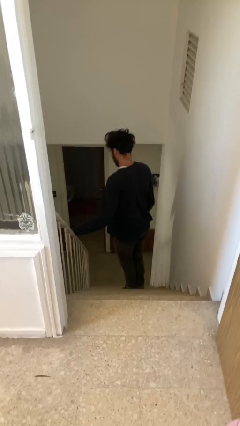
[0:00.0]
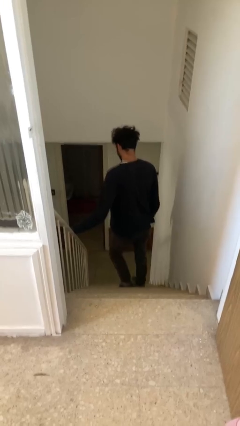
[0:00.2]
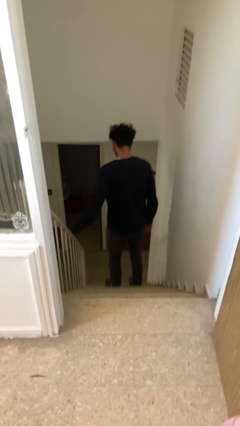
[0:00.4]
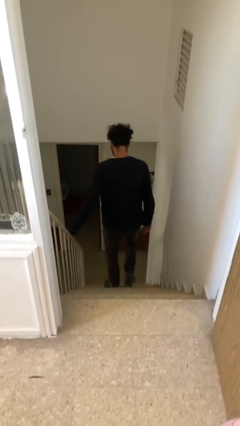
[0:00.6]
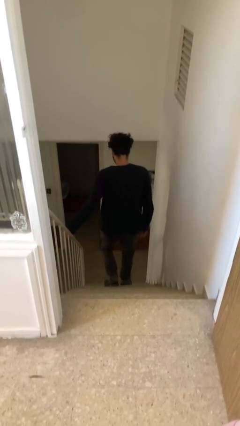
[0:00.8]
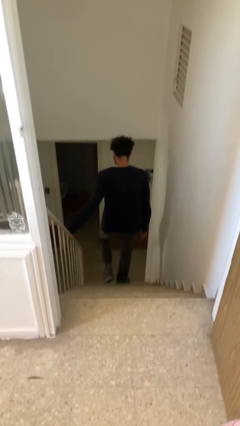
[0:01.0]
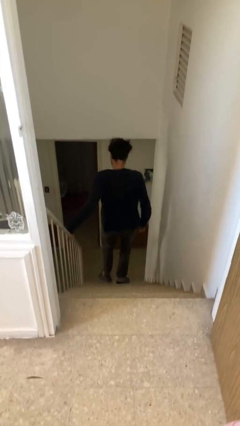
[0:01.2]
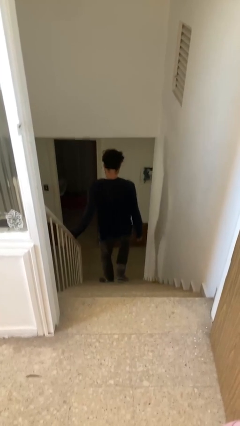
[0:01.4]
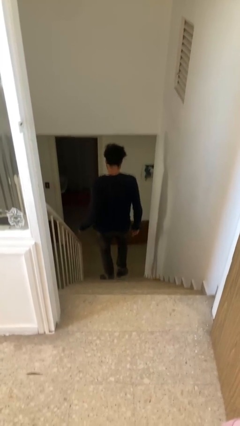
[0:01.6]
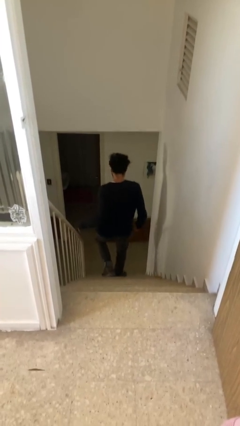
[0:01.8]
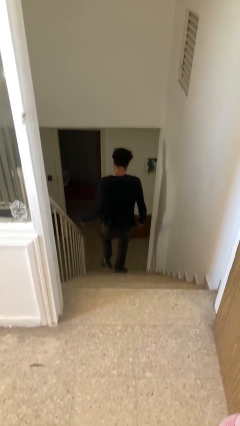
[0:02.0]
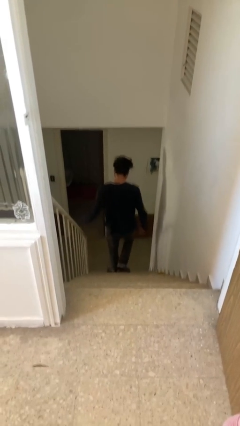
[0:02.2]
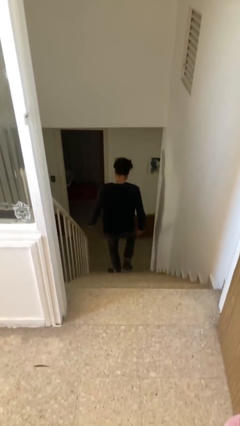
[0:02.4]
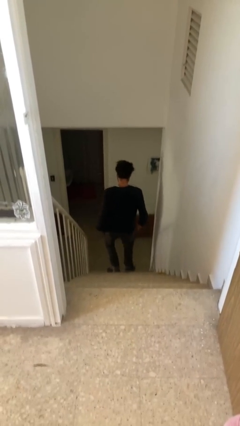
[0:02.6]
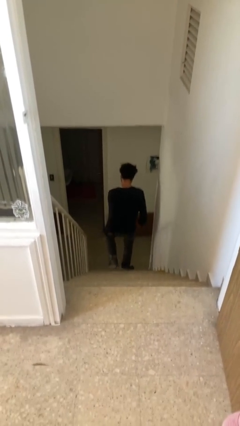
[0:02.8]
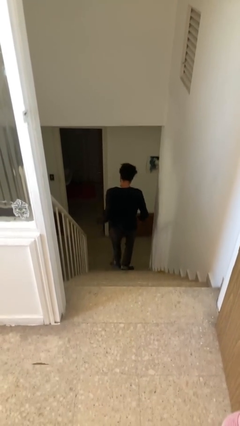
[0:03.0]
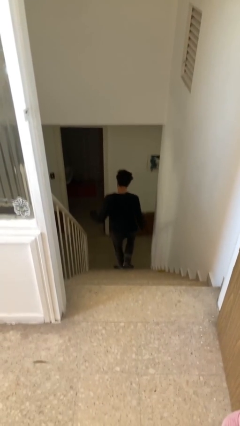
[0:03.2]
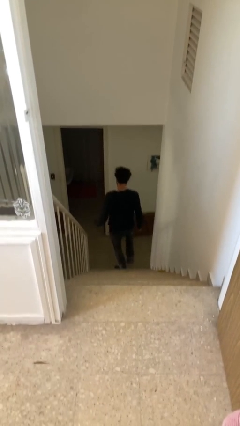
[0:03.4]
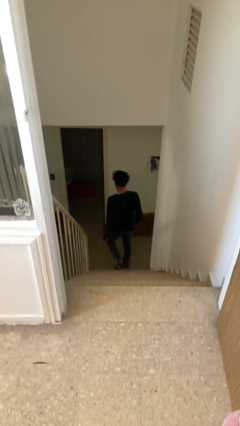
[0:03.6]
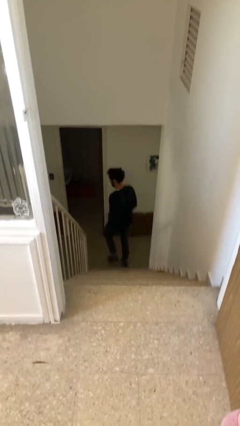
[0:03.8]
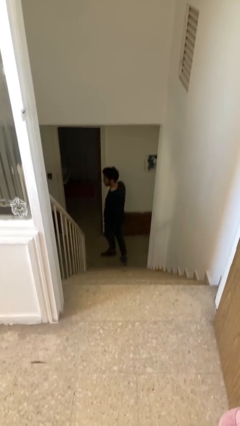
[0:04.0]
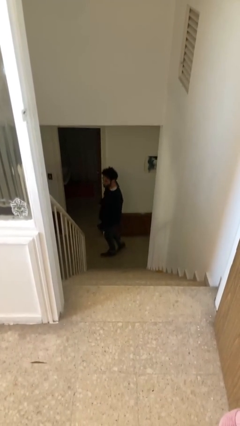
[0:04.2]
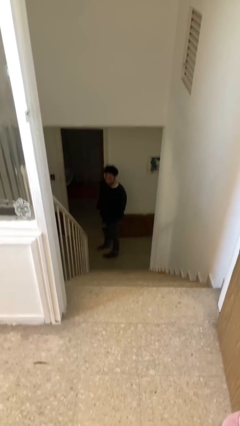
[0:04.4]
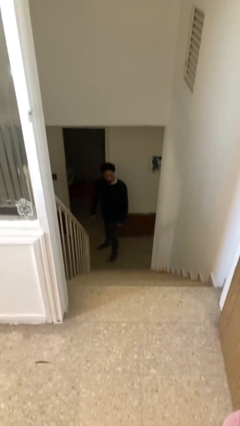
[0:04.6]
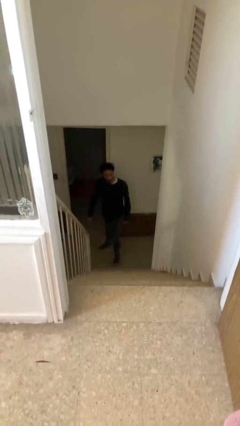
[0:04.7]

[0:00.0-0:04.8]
person climbs down stairs

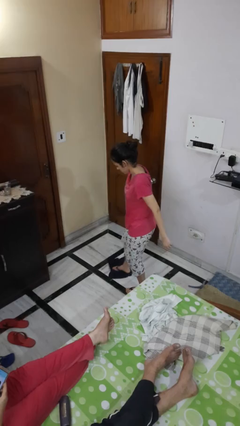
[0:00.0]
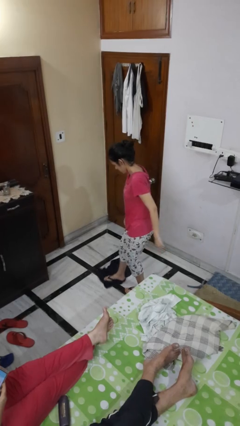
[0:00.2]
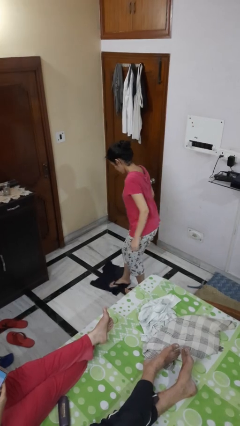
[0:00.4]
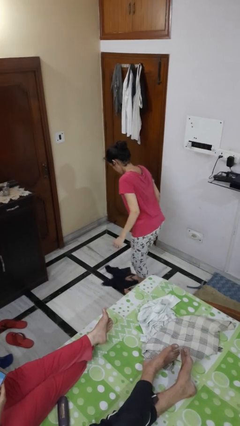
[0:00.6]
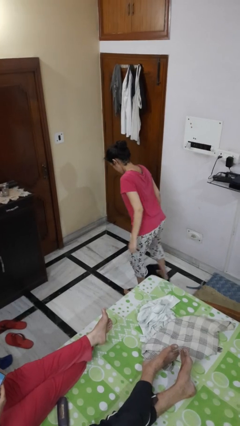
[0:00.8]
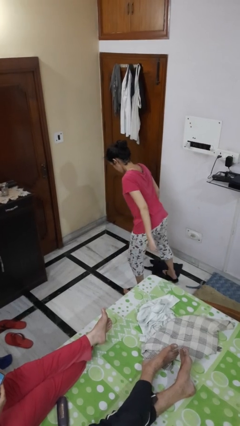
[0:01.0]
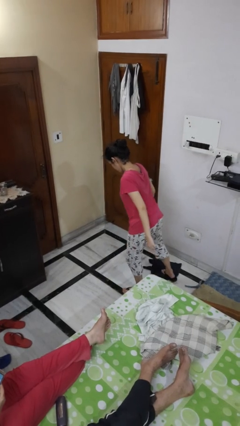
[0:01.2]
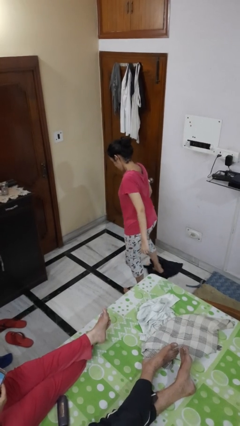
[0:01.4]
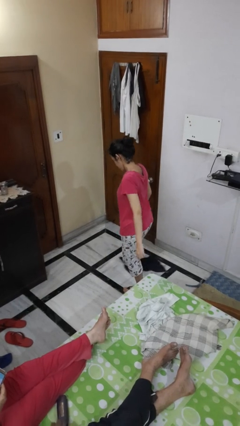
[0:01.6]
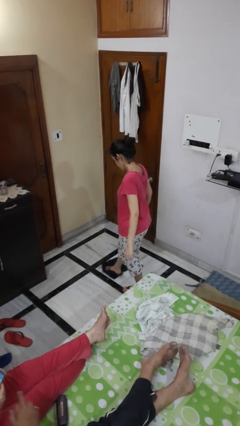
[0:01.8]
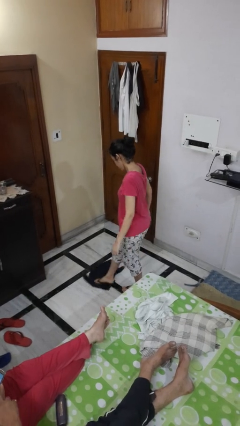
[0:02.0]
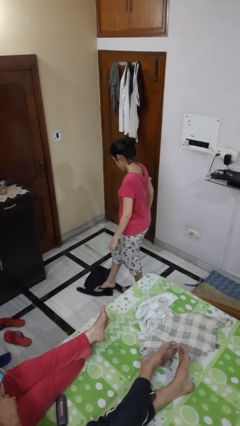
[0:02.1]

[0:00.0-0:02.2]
person mops

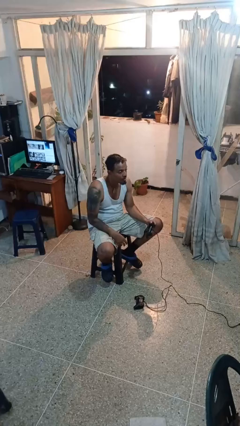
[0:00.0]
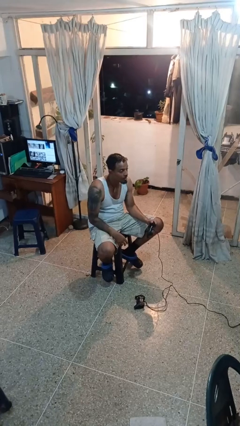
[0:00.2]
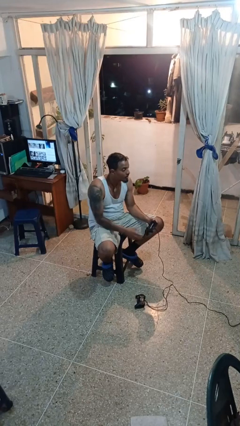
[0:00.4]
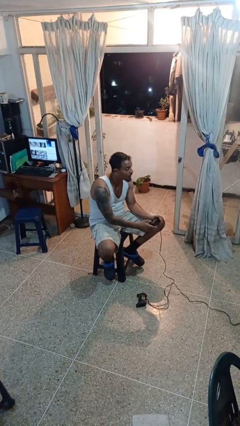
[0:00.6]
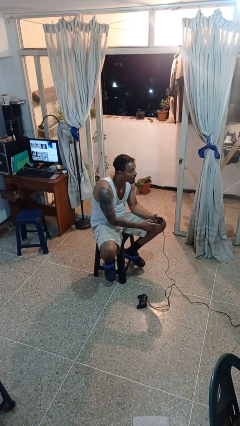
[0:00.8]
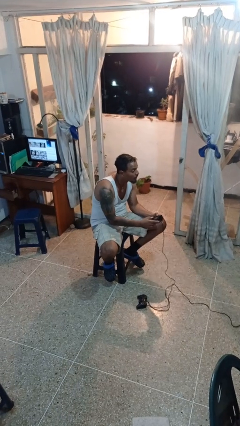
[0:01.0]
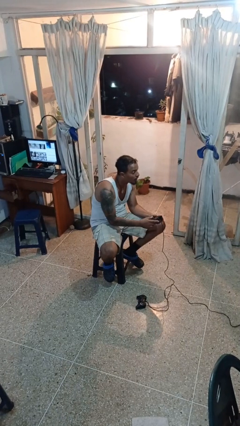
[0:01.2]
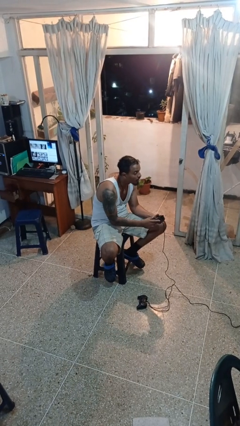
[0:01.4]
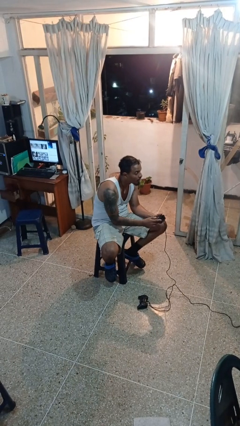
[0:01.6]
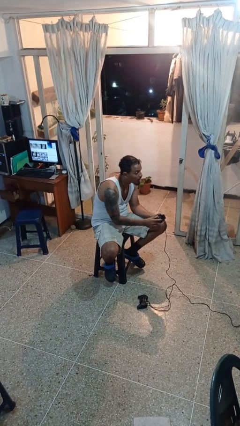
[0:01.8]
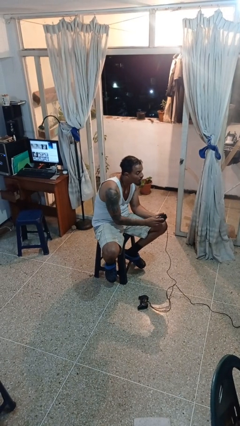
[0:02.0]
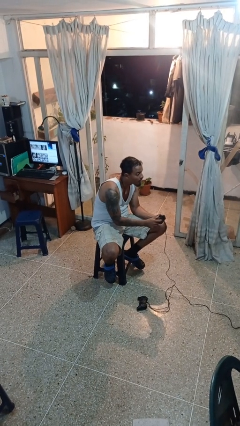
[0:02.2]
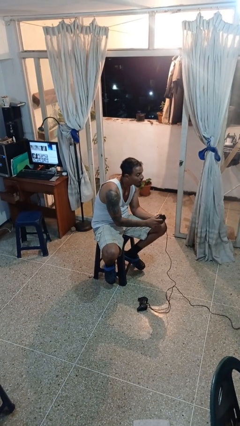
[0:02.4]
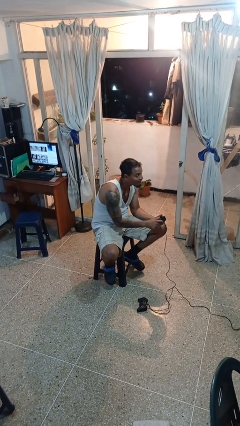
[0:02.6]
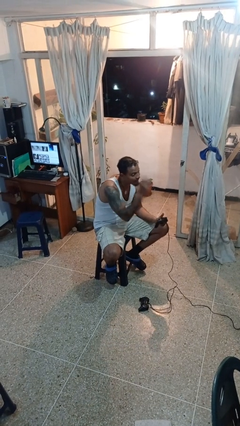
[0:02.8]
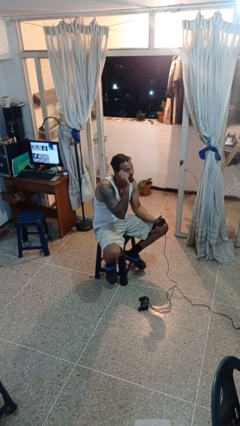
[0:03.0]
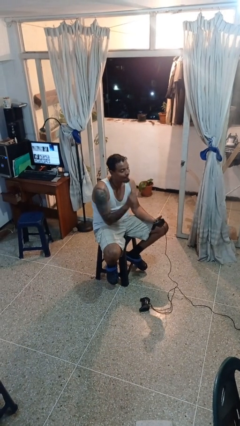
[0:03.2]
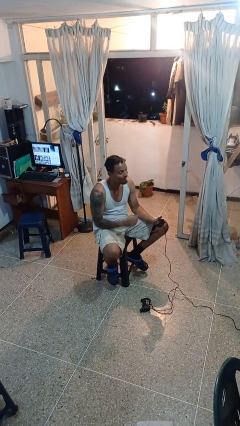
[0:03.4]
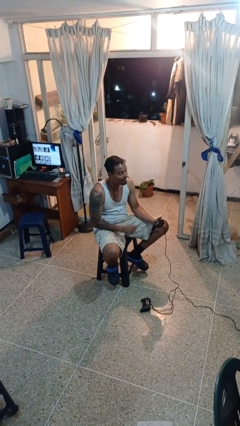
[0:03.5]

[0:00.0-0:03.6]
person interacts with handheld game

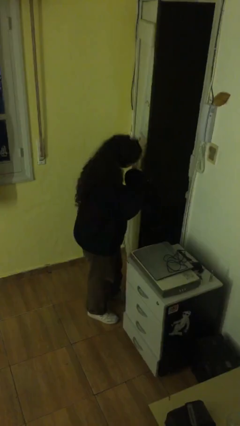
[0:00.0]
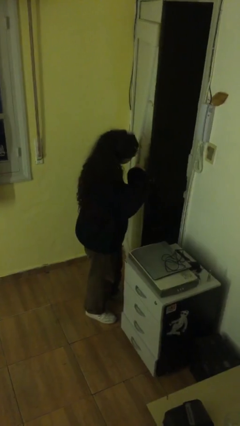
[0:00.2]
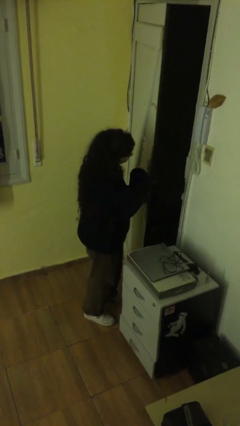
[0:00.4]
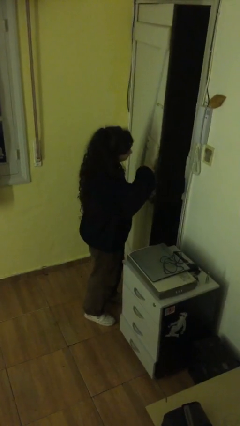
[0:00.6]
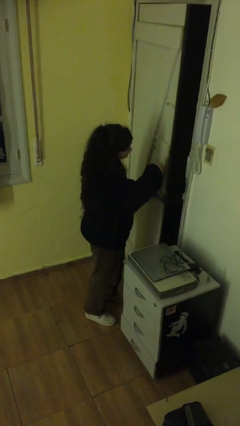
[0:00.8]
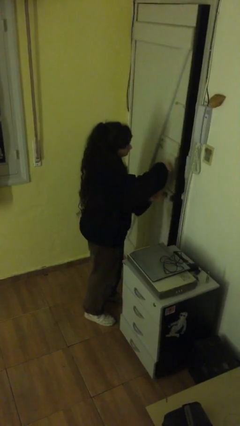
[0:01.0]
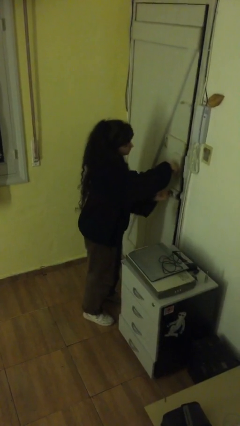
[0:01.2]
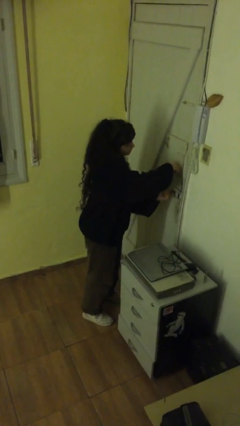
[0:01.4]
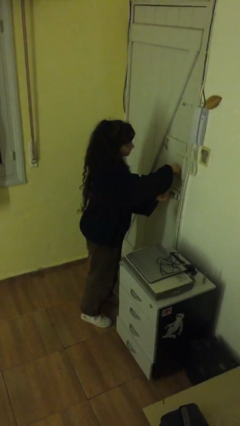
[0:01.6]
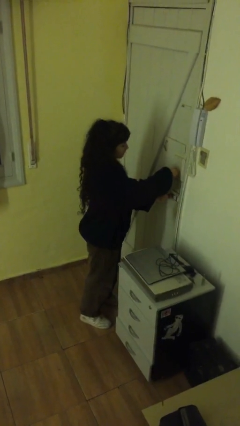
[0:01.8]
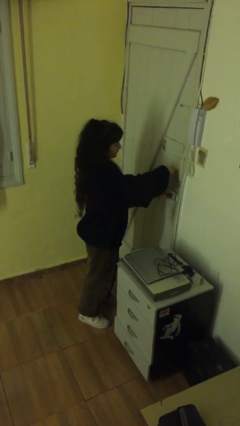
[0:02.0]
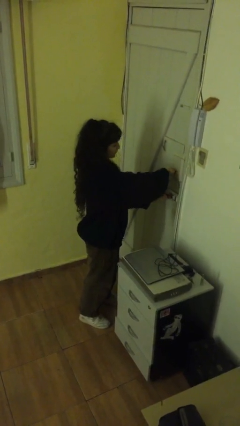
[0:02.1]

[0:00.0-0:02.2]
person closes facility door

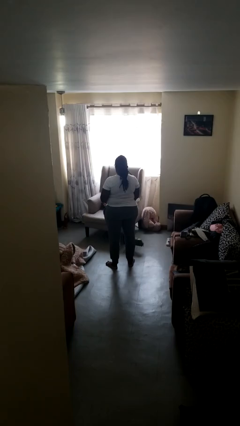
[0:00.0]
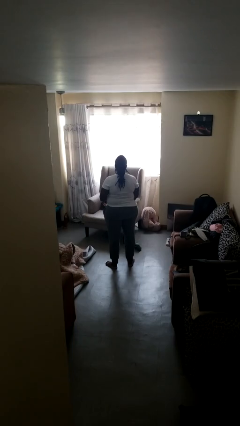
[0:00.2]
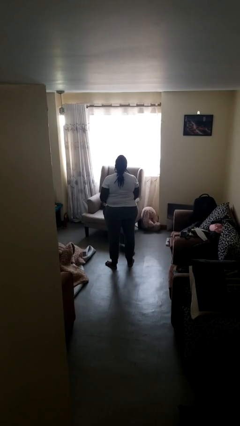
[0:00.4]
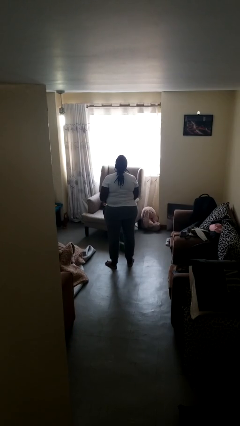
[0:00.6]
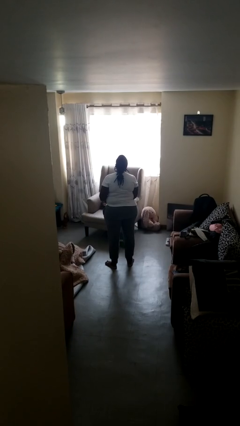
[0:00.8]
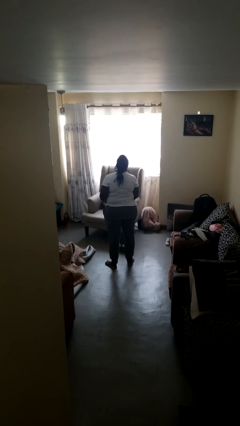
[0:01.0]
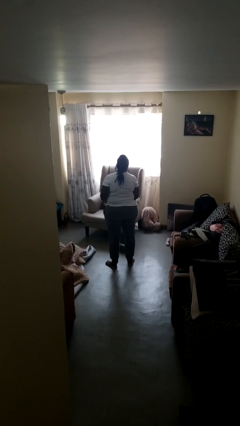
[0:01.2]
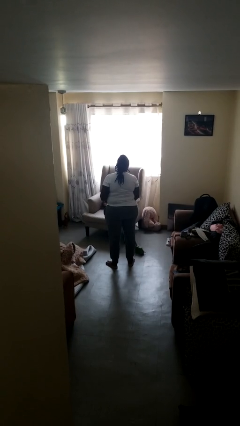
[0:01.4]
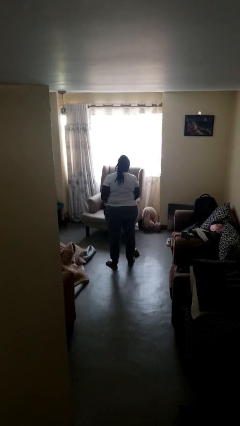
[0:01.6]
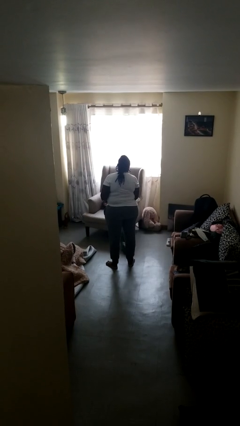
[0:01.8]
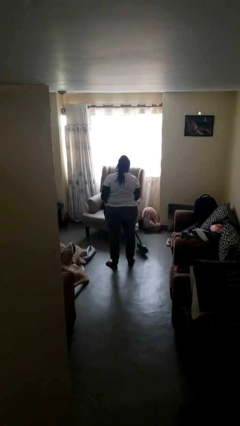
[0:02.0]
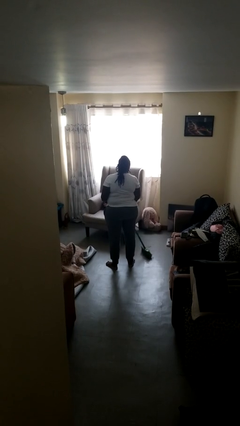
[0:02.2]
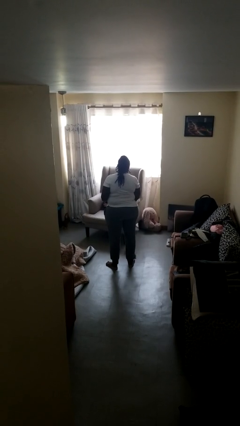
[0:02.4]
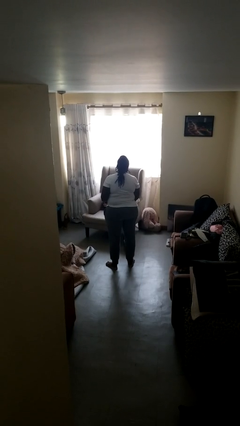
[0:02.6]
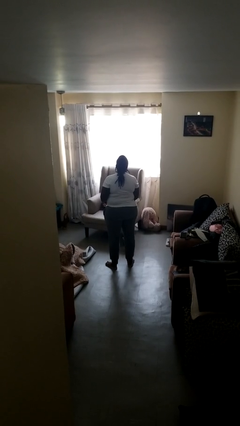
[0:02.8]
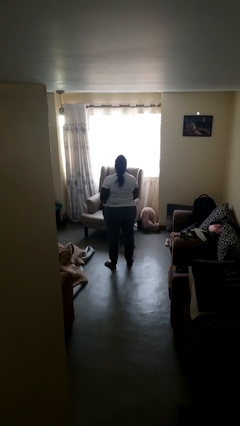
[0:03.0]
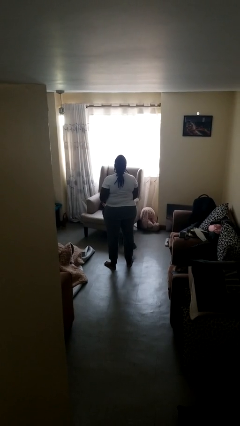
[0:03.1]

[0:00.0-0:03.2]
person sweeps floor

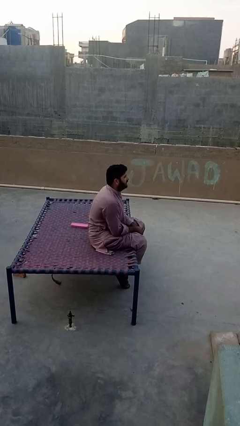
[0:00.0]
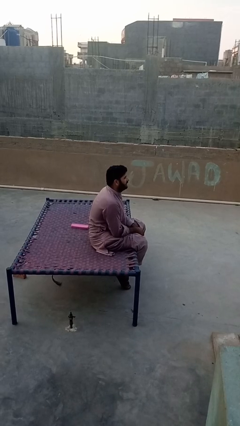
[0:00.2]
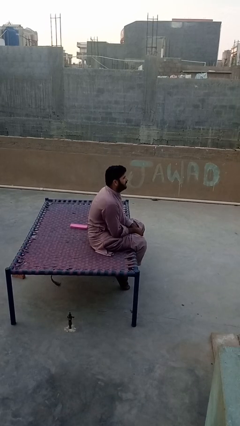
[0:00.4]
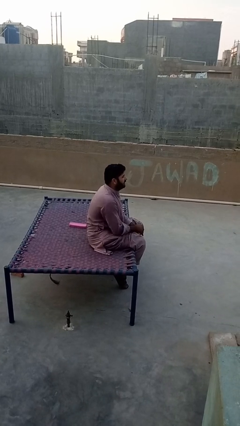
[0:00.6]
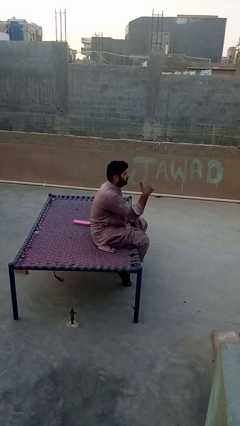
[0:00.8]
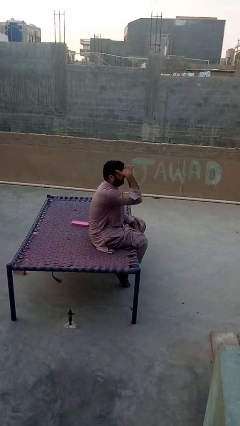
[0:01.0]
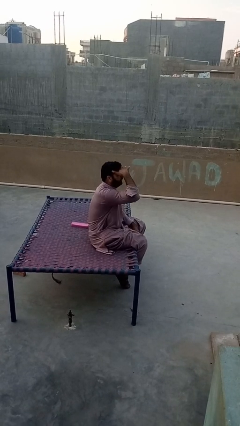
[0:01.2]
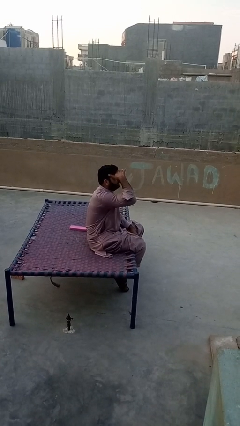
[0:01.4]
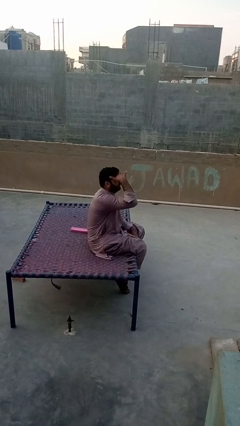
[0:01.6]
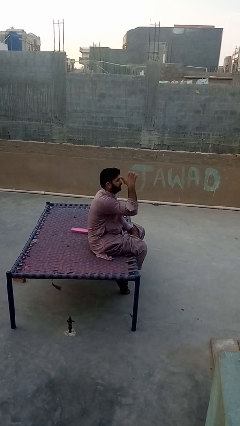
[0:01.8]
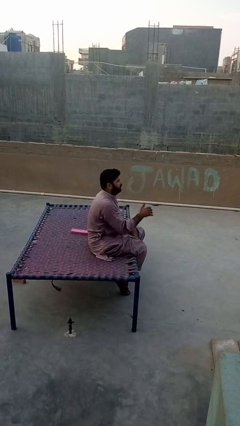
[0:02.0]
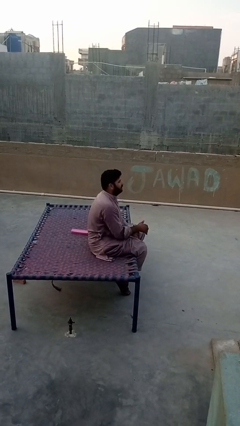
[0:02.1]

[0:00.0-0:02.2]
person shades eyes
